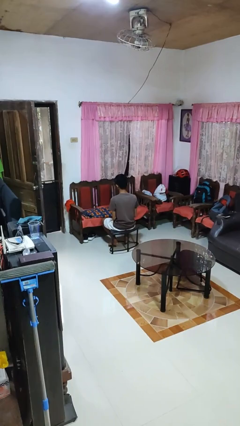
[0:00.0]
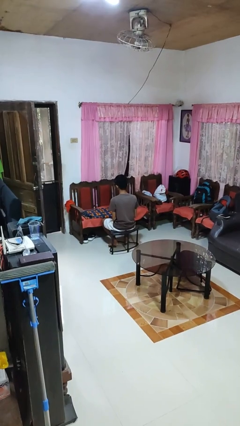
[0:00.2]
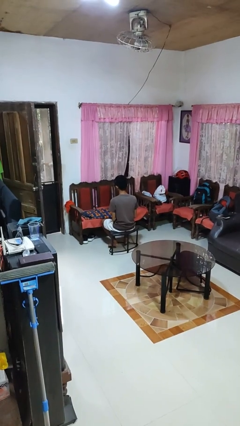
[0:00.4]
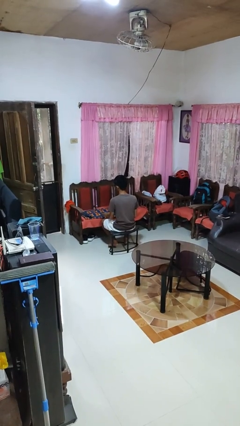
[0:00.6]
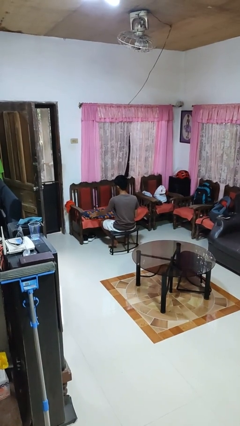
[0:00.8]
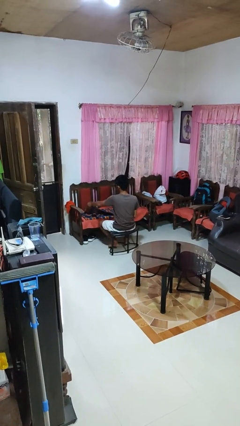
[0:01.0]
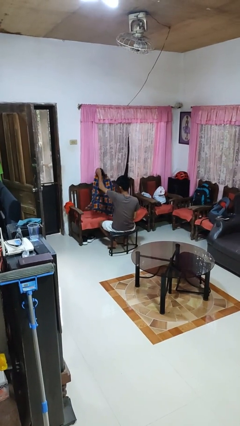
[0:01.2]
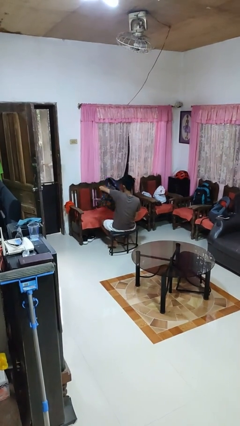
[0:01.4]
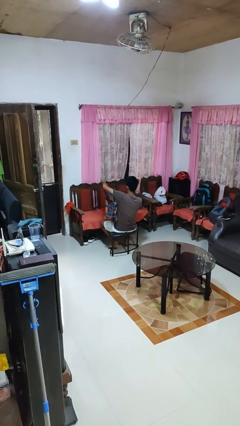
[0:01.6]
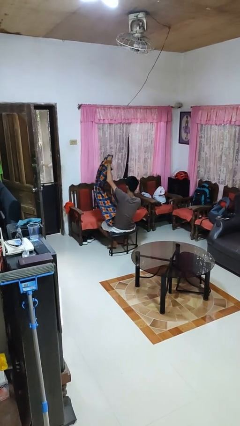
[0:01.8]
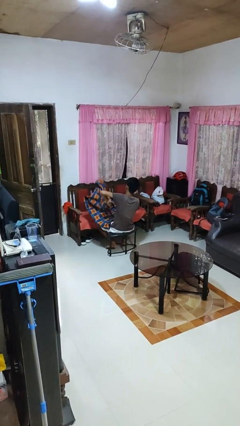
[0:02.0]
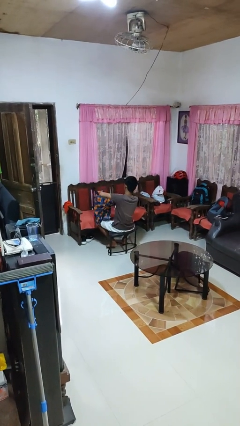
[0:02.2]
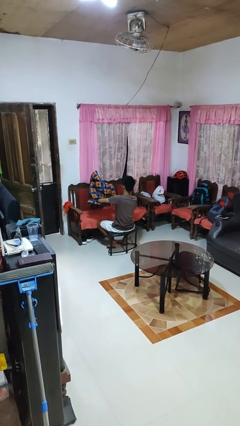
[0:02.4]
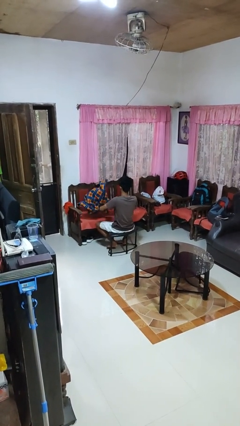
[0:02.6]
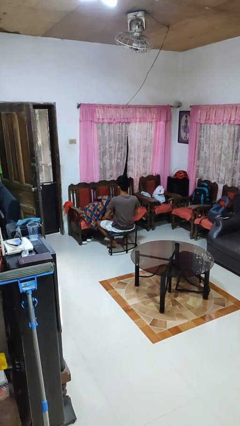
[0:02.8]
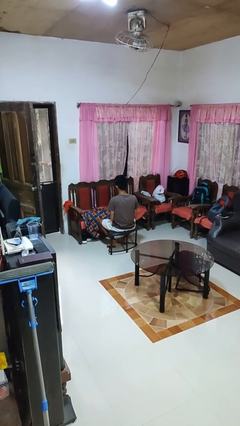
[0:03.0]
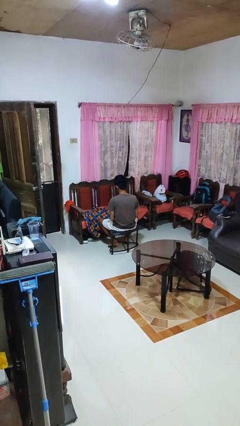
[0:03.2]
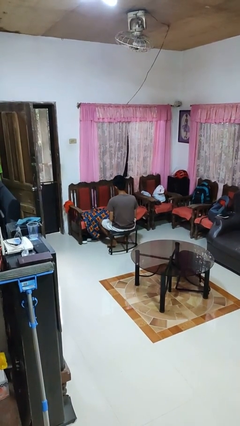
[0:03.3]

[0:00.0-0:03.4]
person unfolds blanket

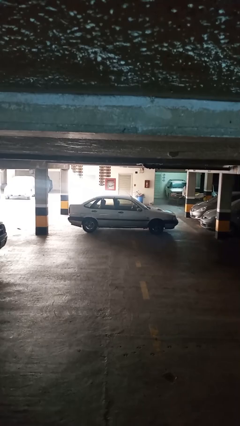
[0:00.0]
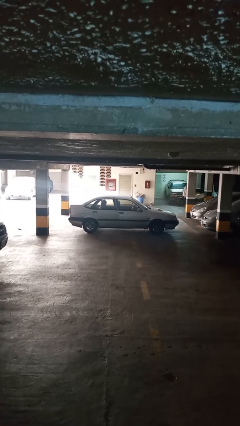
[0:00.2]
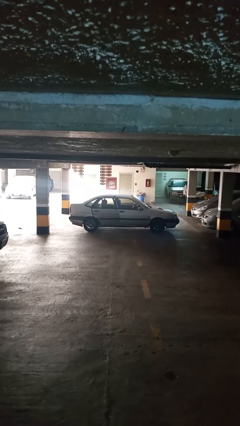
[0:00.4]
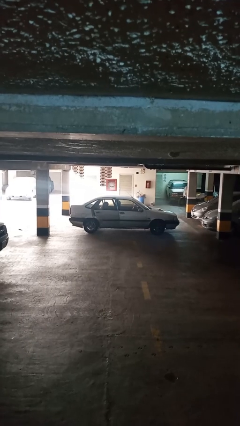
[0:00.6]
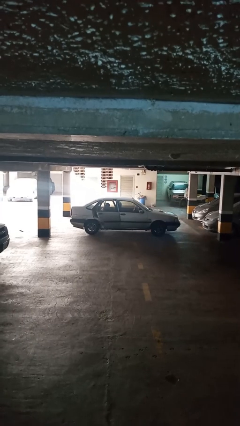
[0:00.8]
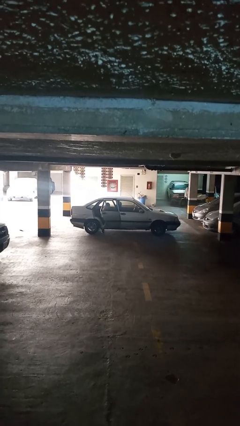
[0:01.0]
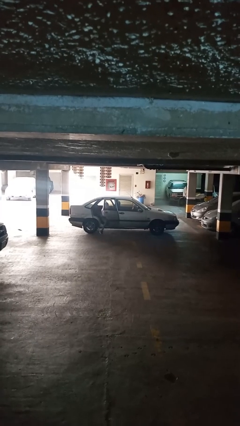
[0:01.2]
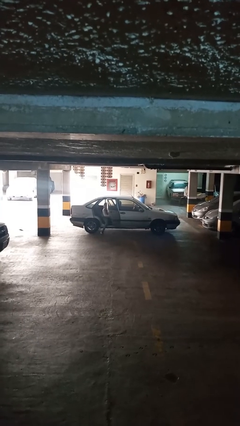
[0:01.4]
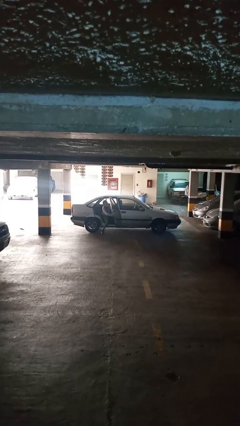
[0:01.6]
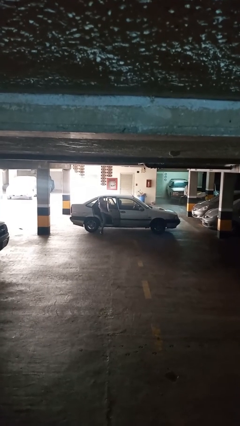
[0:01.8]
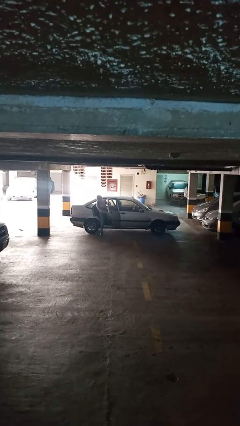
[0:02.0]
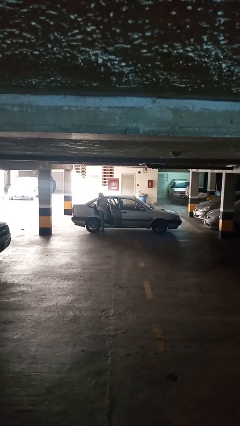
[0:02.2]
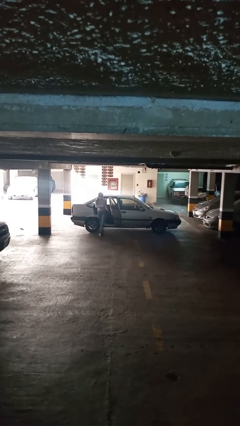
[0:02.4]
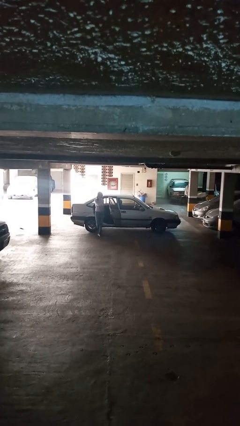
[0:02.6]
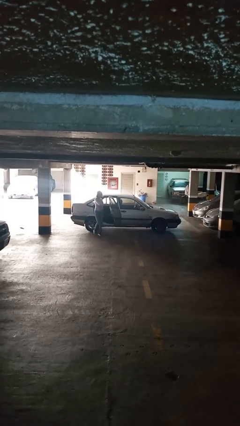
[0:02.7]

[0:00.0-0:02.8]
car drops off person

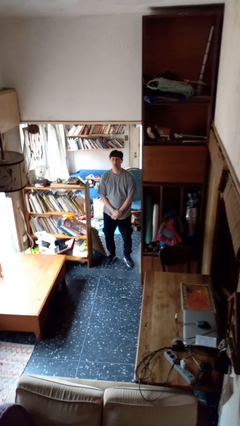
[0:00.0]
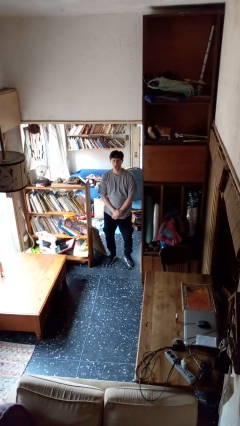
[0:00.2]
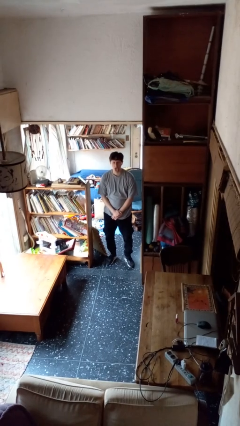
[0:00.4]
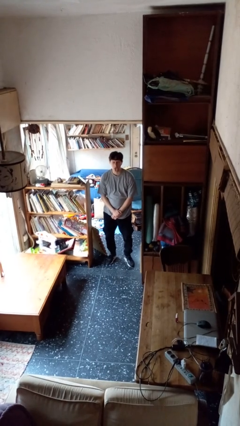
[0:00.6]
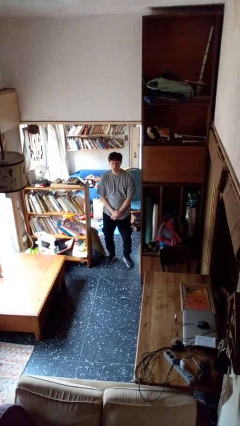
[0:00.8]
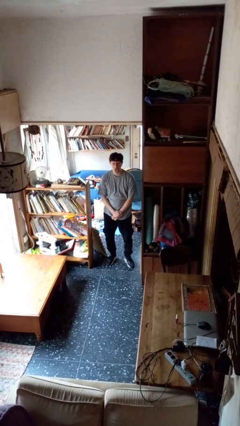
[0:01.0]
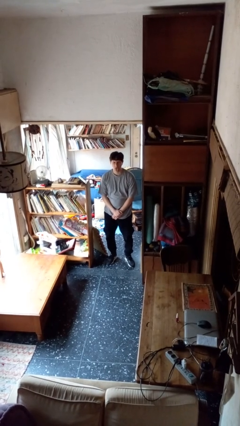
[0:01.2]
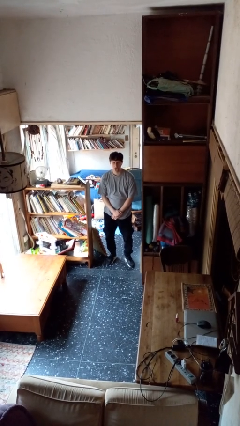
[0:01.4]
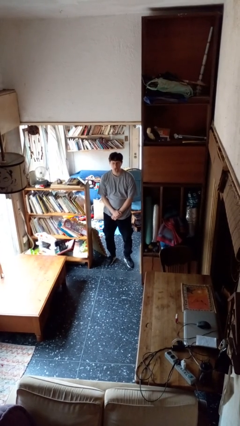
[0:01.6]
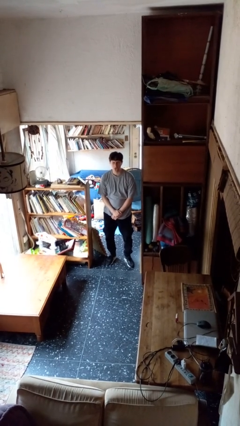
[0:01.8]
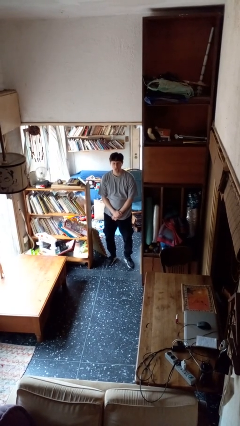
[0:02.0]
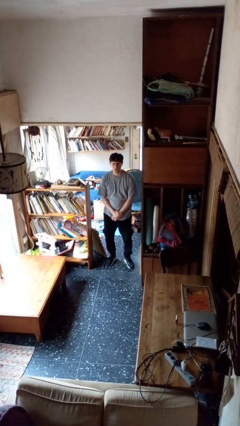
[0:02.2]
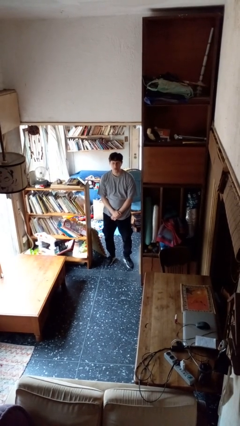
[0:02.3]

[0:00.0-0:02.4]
person sticks out tongue

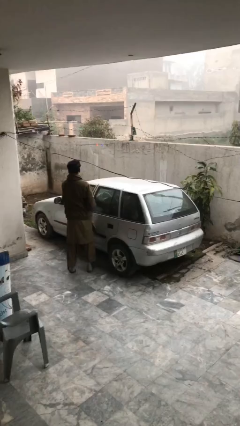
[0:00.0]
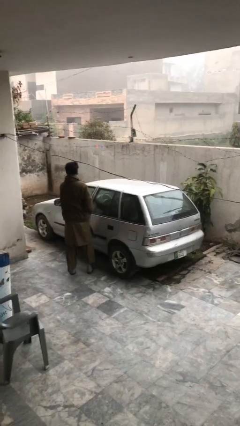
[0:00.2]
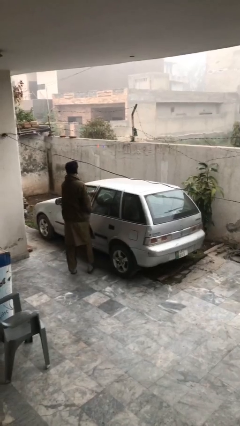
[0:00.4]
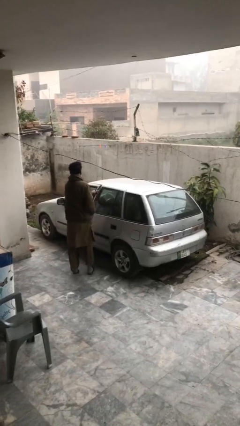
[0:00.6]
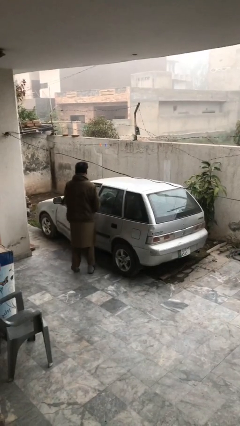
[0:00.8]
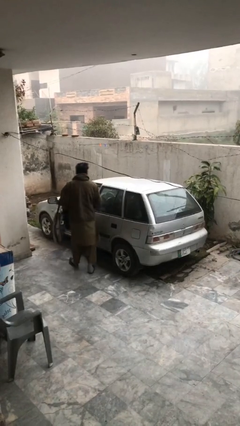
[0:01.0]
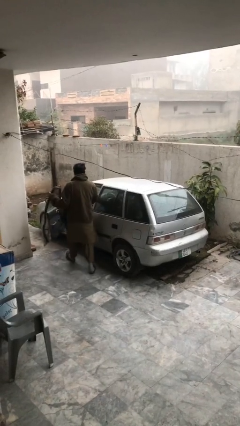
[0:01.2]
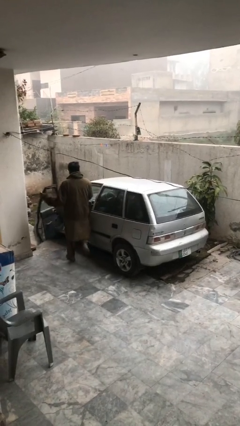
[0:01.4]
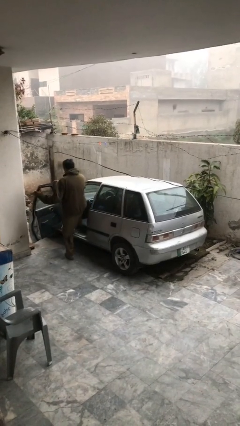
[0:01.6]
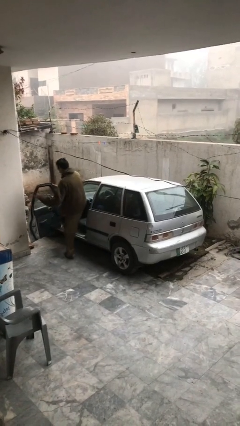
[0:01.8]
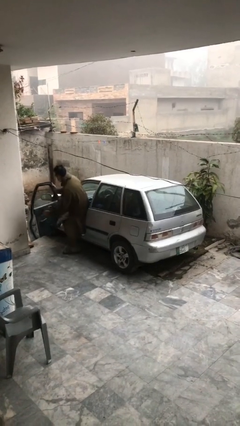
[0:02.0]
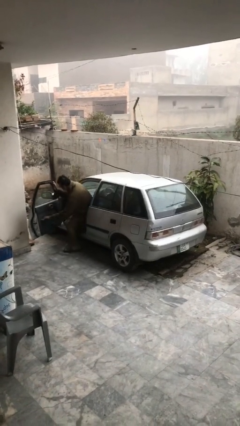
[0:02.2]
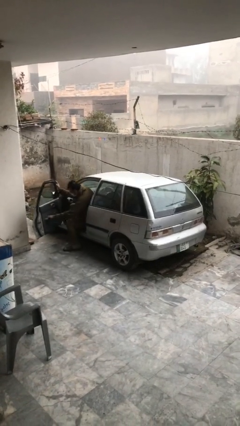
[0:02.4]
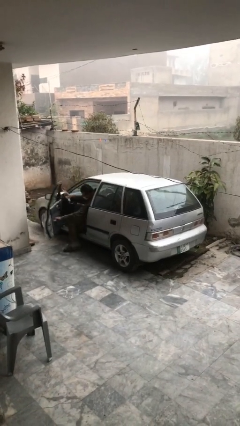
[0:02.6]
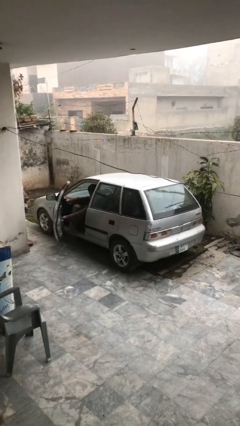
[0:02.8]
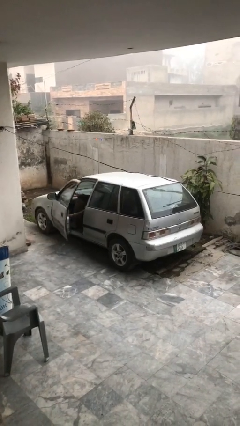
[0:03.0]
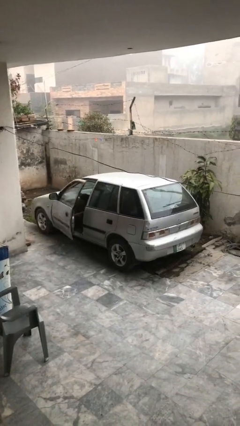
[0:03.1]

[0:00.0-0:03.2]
car picks up person

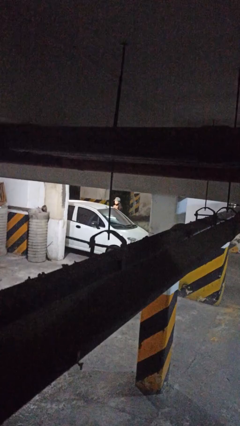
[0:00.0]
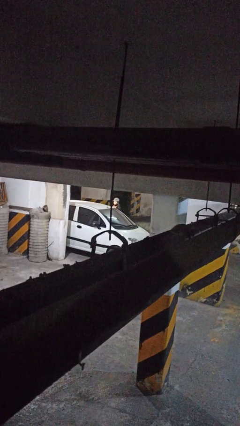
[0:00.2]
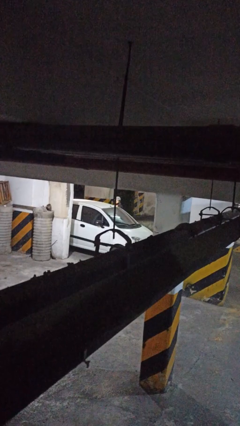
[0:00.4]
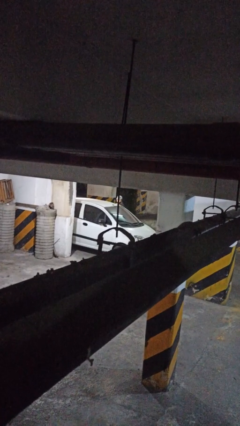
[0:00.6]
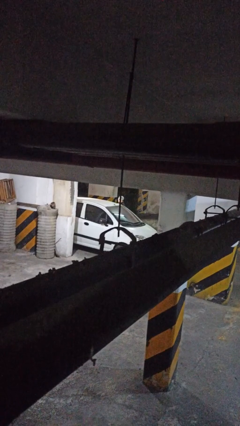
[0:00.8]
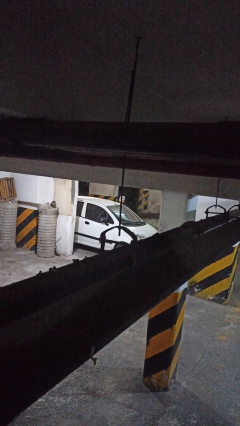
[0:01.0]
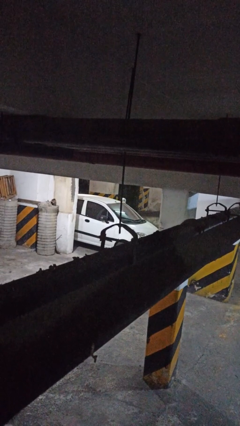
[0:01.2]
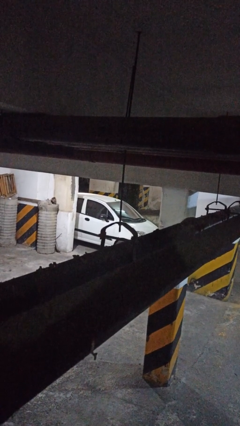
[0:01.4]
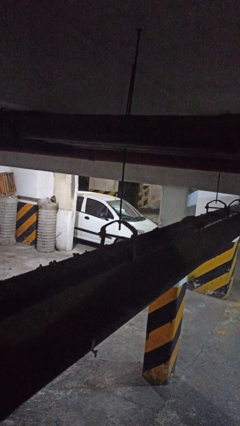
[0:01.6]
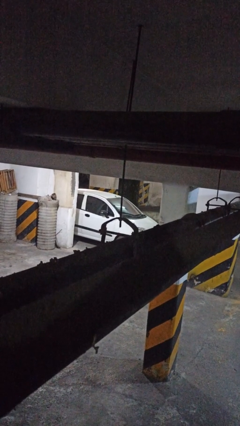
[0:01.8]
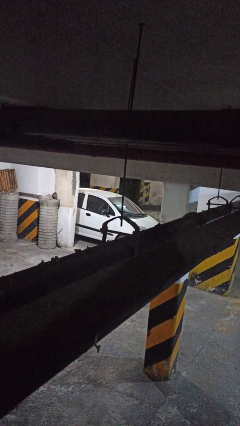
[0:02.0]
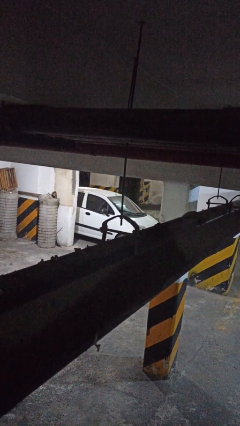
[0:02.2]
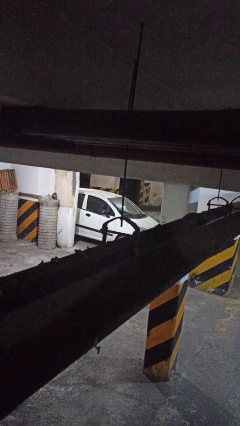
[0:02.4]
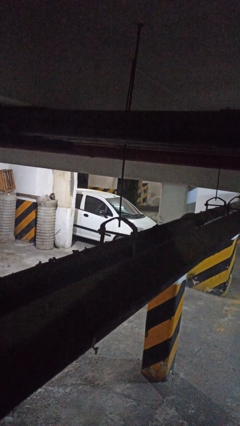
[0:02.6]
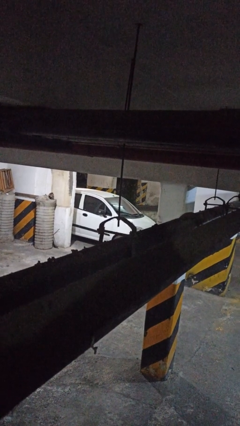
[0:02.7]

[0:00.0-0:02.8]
person enters car

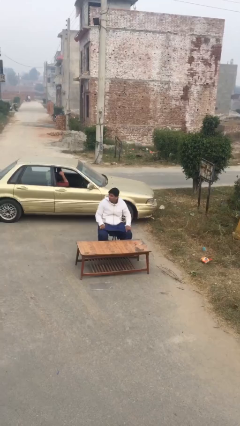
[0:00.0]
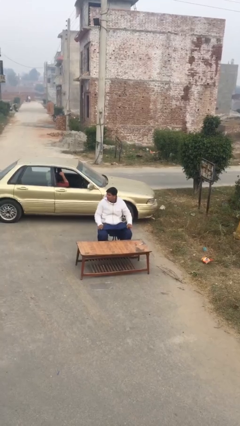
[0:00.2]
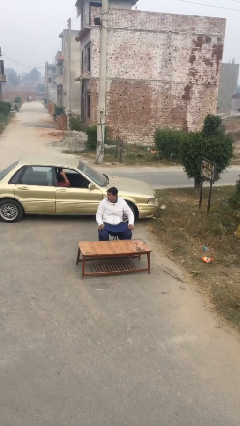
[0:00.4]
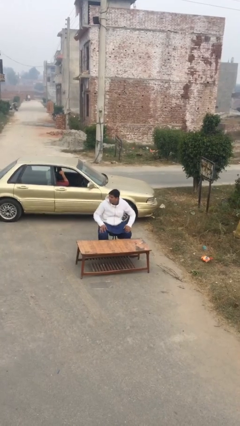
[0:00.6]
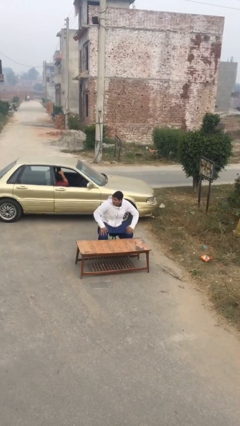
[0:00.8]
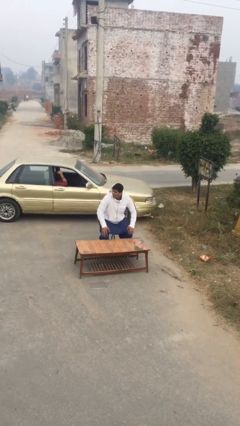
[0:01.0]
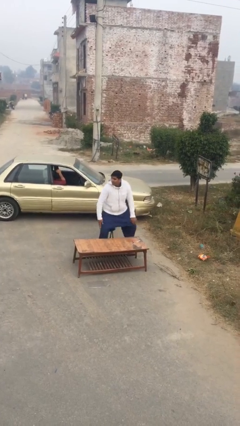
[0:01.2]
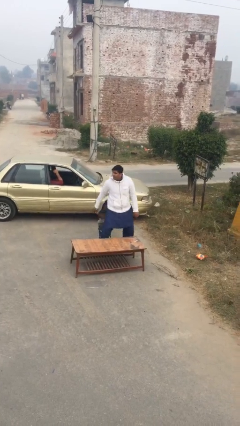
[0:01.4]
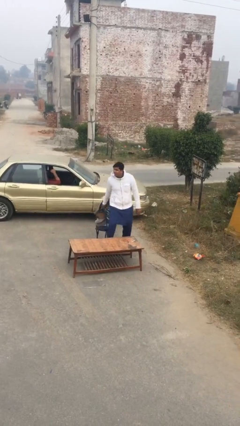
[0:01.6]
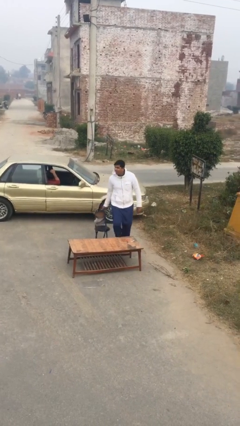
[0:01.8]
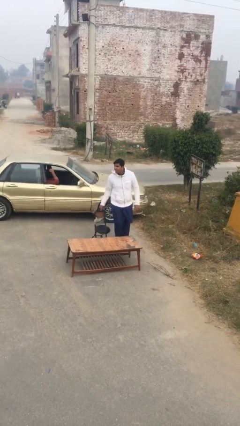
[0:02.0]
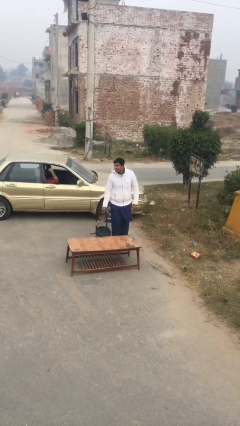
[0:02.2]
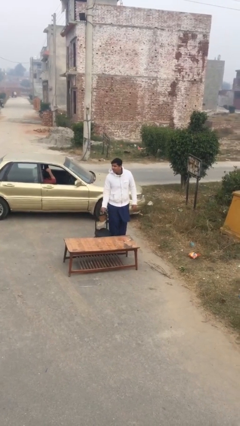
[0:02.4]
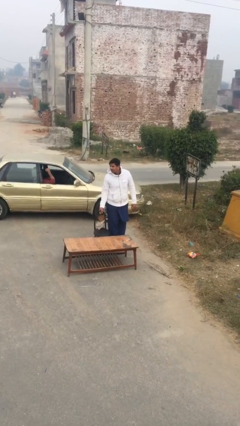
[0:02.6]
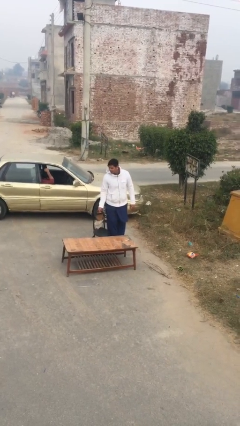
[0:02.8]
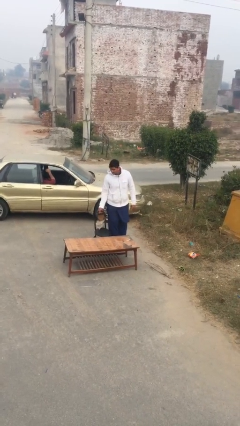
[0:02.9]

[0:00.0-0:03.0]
person stands up
